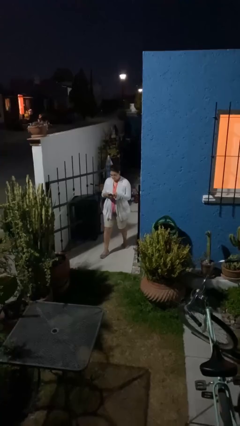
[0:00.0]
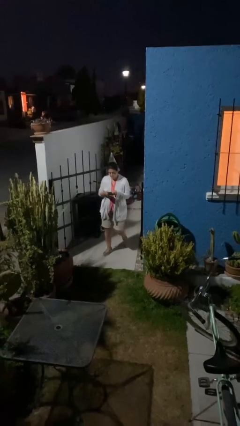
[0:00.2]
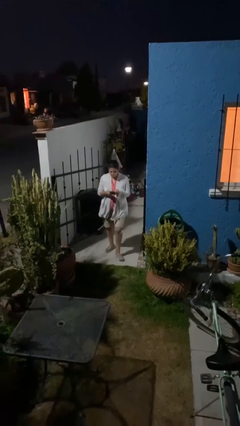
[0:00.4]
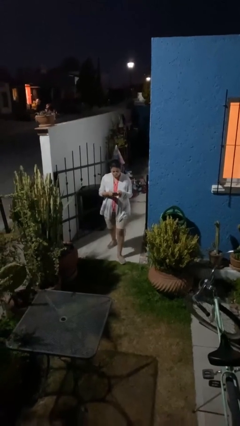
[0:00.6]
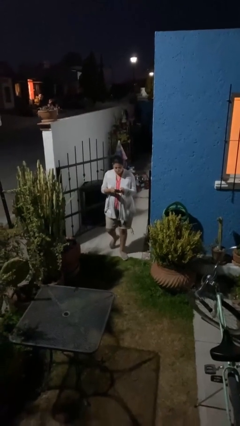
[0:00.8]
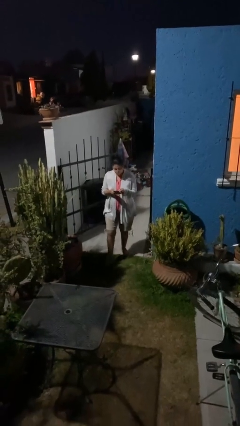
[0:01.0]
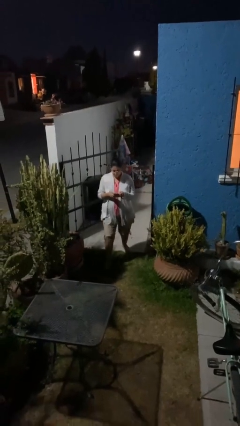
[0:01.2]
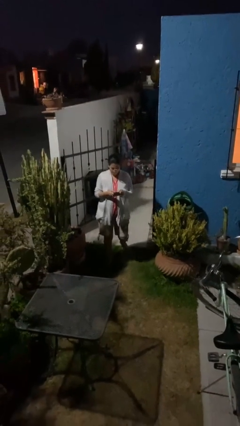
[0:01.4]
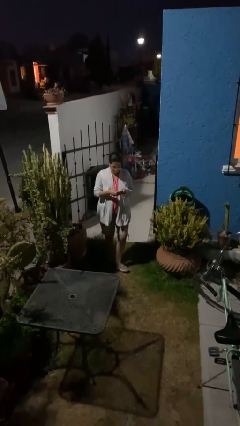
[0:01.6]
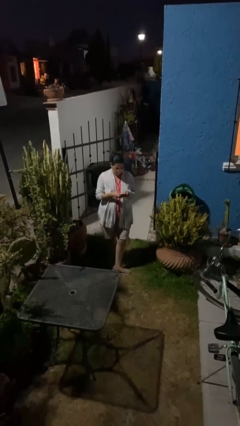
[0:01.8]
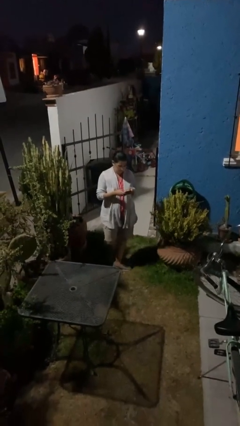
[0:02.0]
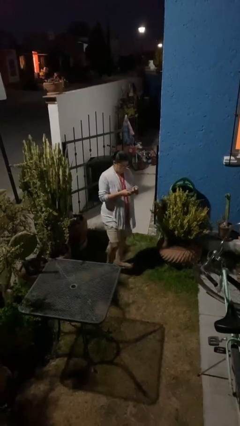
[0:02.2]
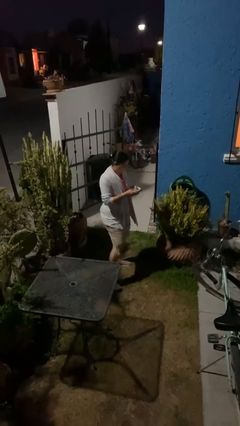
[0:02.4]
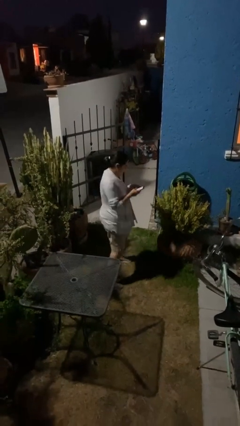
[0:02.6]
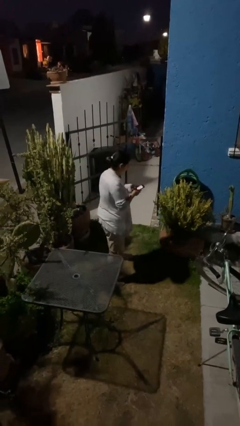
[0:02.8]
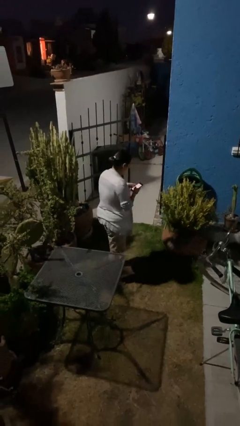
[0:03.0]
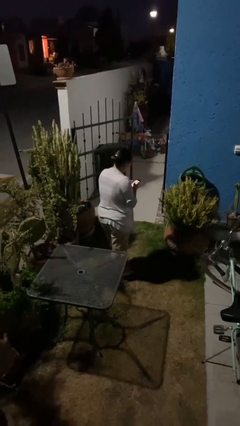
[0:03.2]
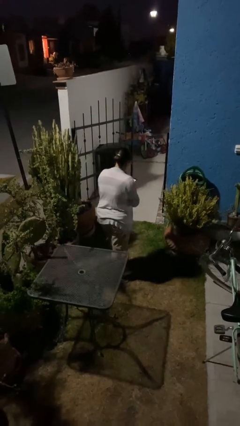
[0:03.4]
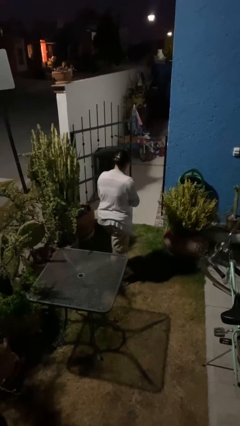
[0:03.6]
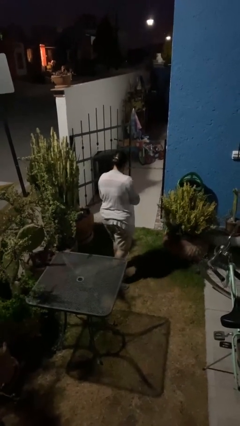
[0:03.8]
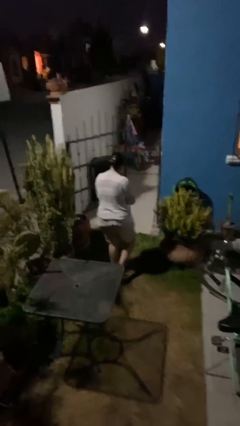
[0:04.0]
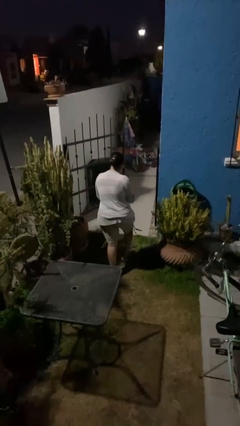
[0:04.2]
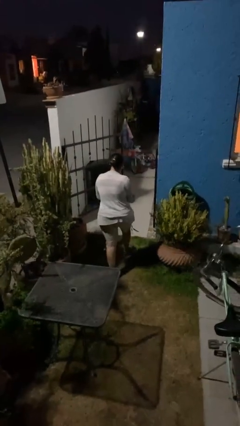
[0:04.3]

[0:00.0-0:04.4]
person enters scene through structure

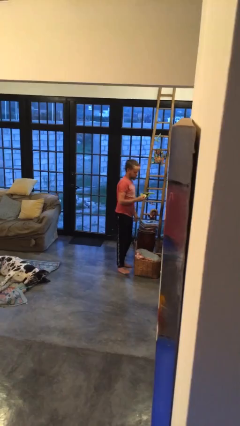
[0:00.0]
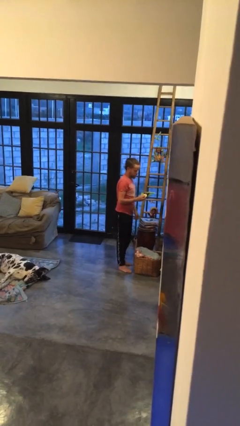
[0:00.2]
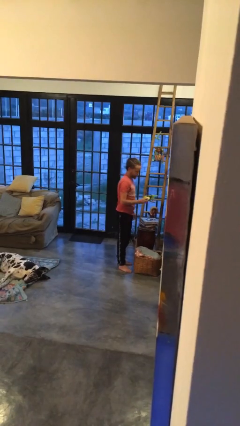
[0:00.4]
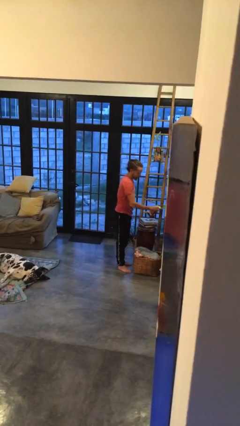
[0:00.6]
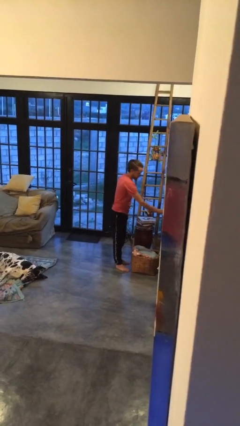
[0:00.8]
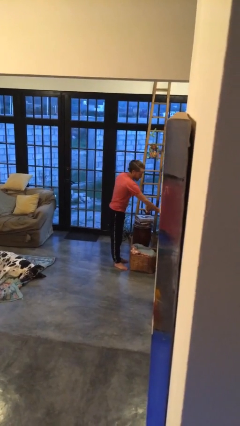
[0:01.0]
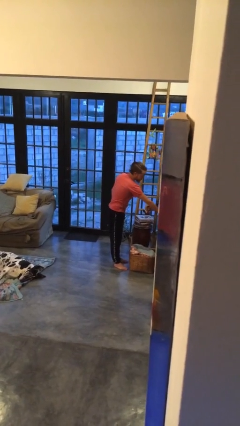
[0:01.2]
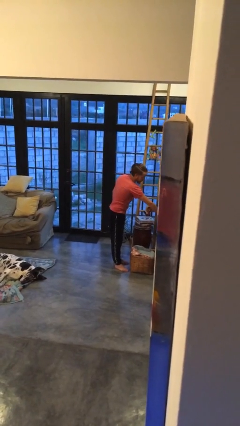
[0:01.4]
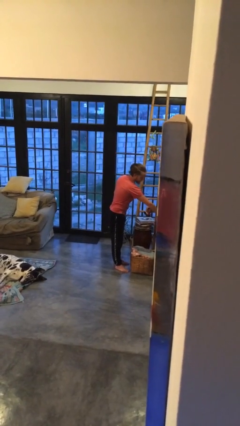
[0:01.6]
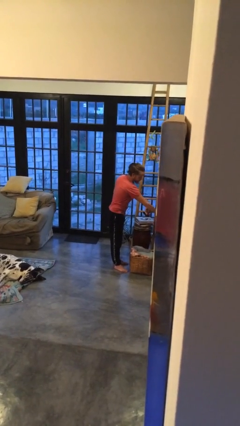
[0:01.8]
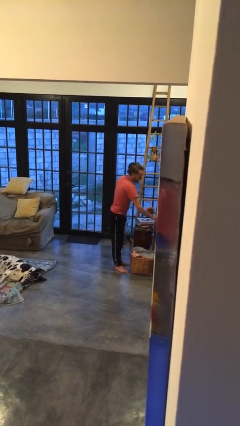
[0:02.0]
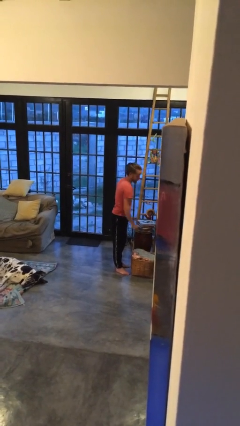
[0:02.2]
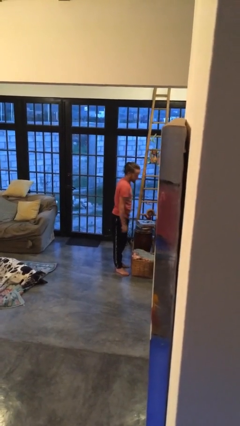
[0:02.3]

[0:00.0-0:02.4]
person puts down object on countertop

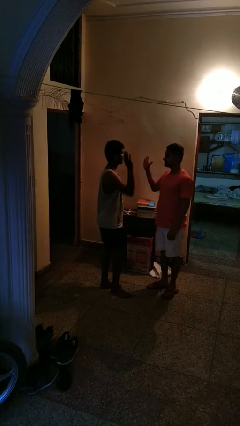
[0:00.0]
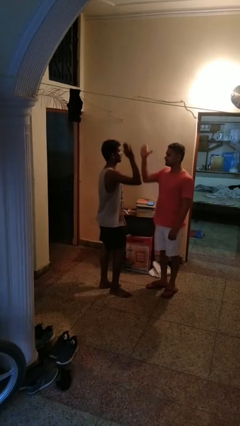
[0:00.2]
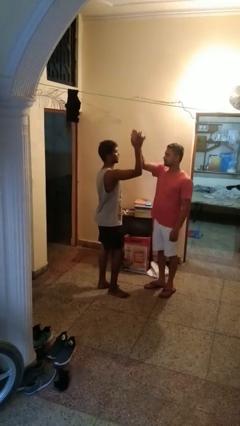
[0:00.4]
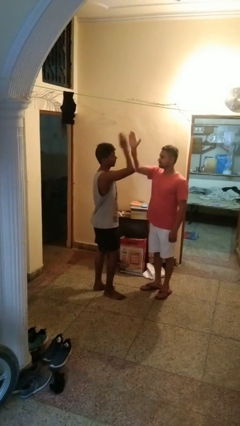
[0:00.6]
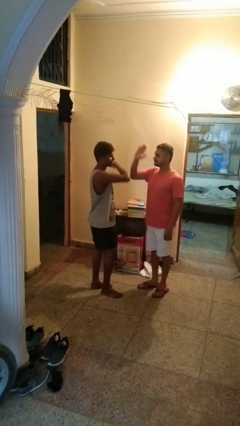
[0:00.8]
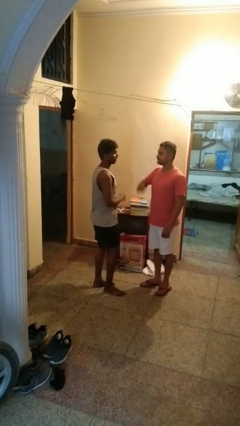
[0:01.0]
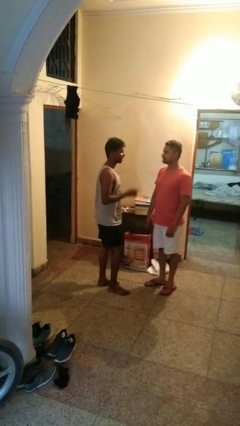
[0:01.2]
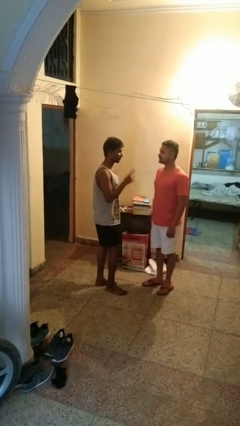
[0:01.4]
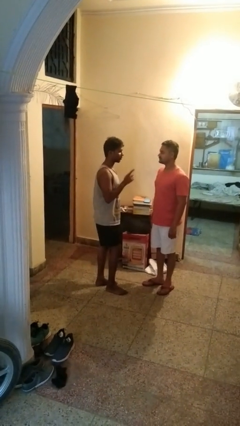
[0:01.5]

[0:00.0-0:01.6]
person highfives hand

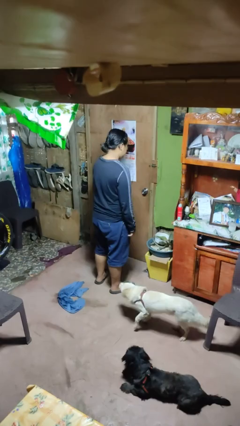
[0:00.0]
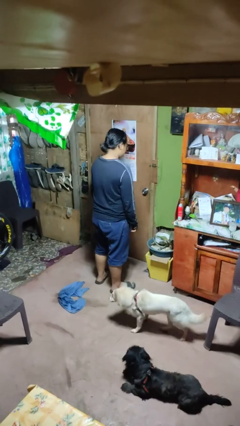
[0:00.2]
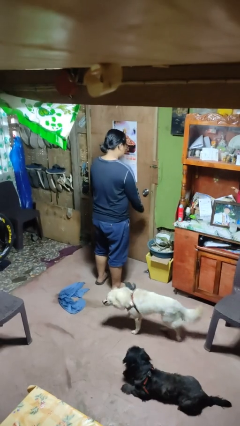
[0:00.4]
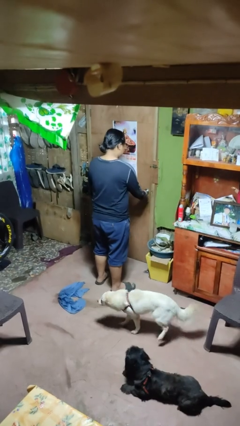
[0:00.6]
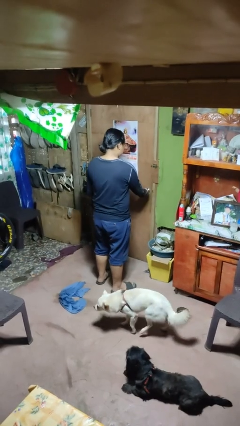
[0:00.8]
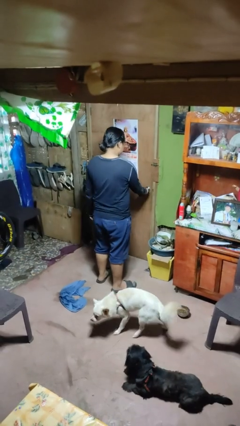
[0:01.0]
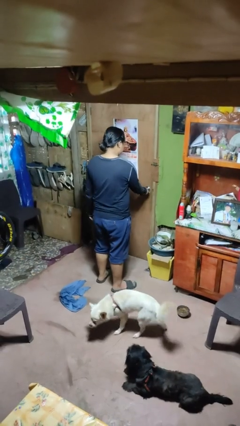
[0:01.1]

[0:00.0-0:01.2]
person locks door with keys

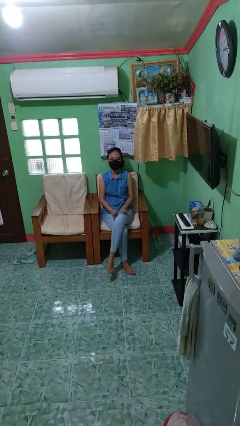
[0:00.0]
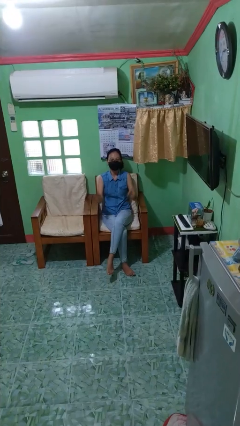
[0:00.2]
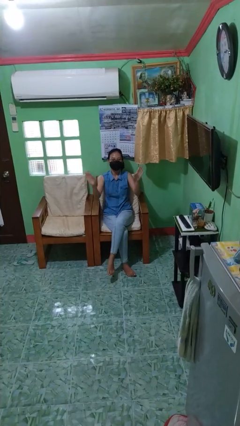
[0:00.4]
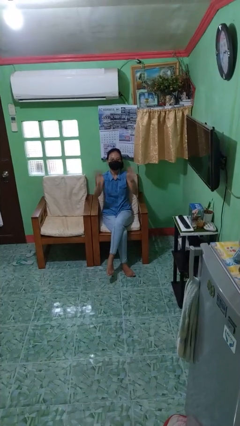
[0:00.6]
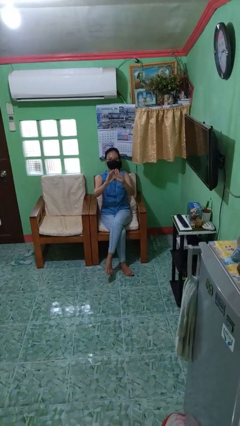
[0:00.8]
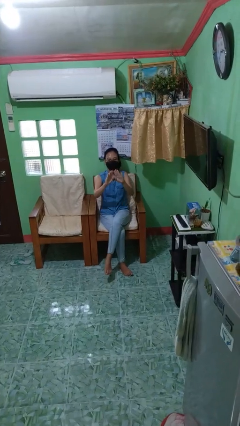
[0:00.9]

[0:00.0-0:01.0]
person gestures zoom out

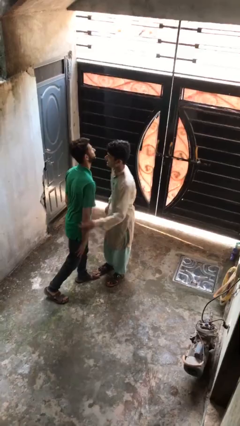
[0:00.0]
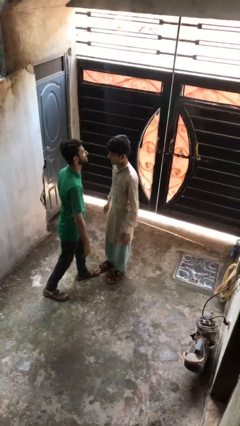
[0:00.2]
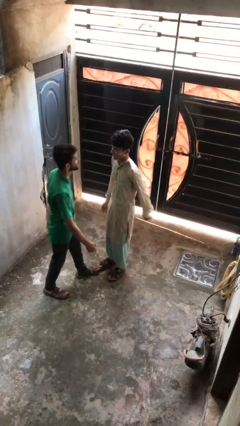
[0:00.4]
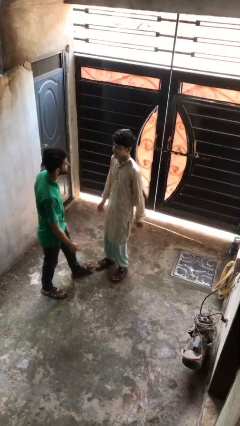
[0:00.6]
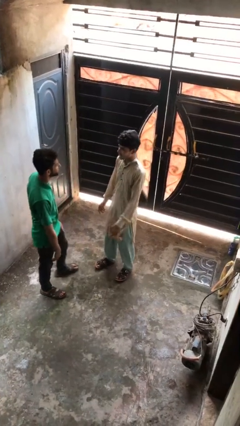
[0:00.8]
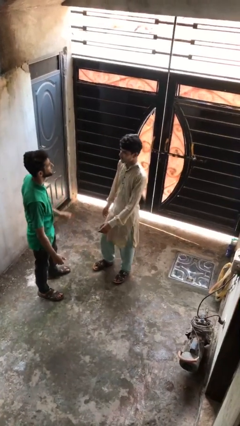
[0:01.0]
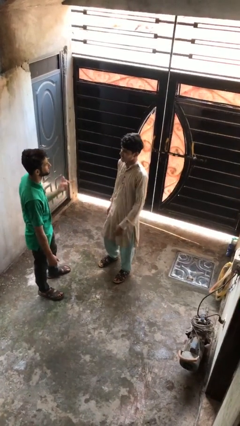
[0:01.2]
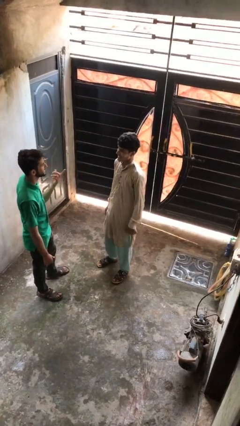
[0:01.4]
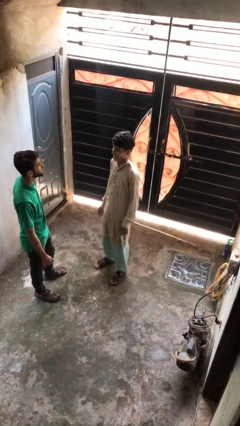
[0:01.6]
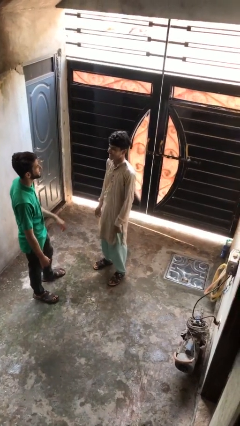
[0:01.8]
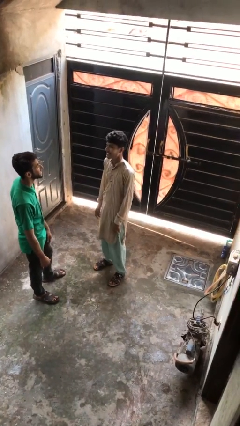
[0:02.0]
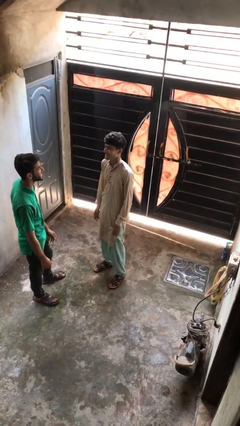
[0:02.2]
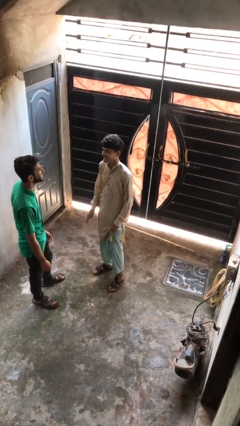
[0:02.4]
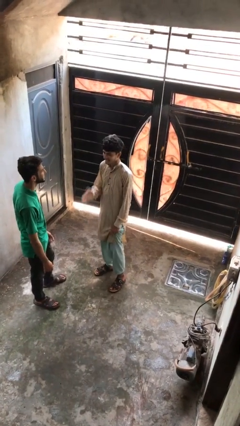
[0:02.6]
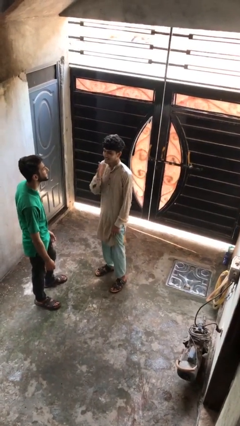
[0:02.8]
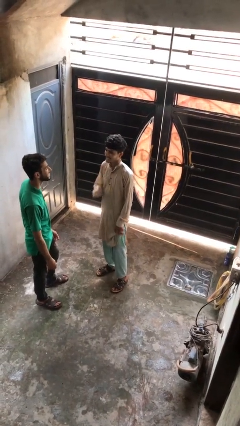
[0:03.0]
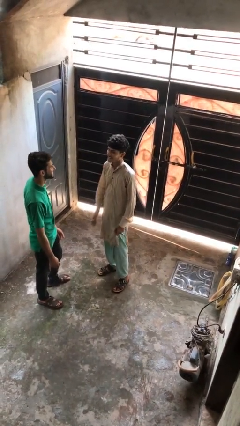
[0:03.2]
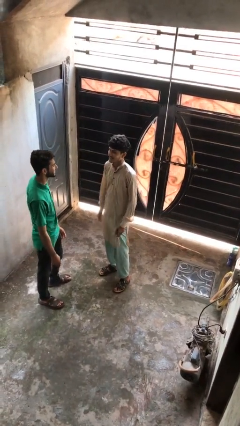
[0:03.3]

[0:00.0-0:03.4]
person talks to person

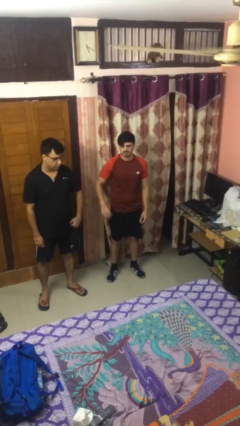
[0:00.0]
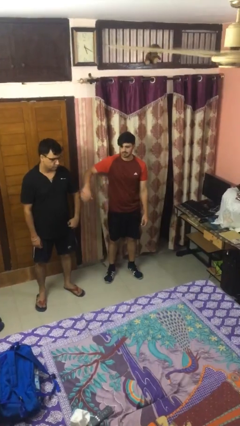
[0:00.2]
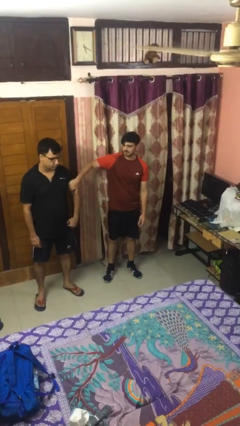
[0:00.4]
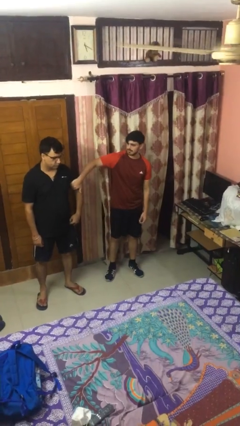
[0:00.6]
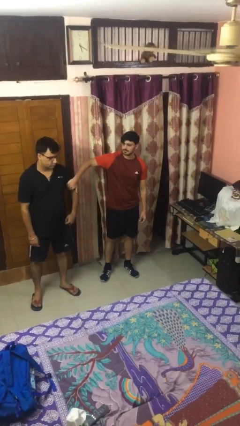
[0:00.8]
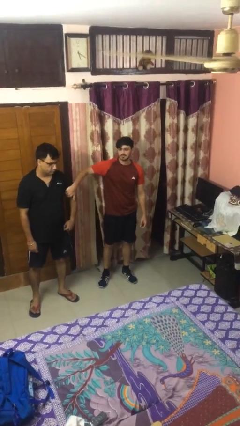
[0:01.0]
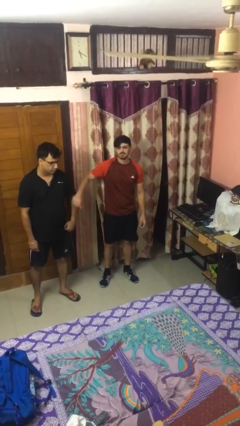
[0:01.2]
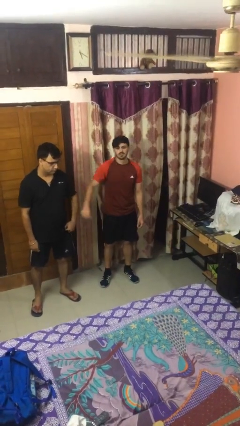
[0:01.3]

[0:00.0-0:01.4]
person grabs person by bicep

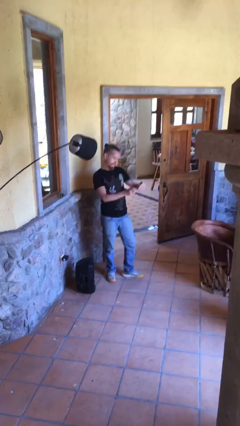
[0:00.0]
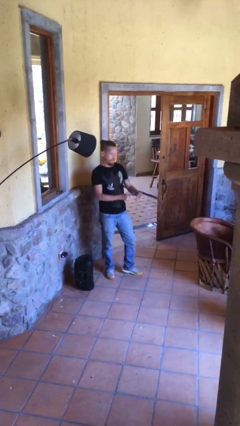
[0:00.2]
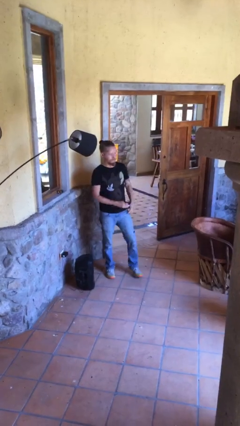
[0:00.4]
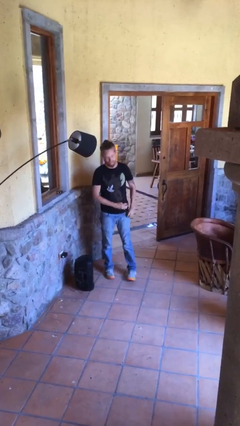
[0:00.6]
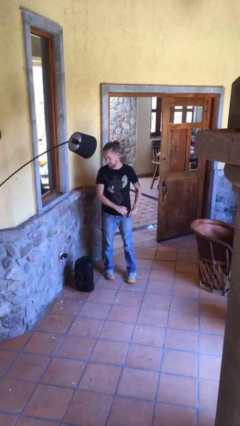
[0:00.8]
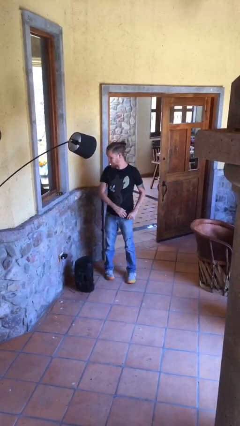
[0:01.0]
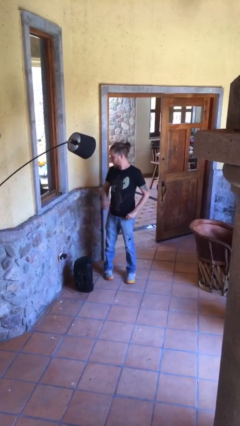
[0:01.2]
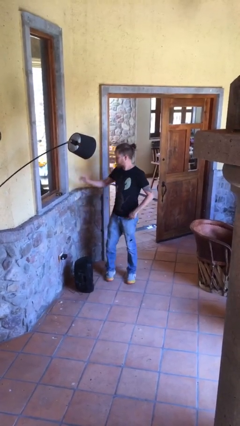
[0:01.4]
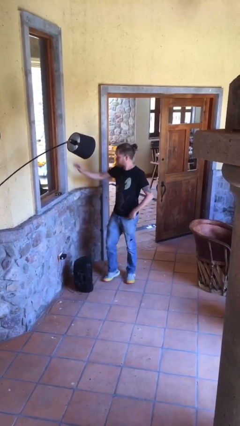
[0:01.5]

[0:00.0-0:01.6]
person puts phone into pocket

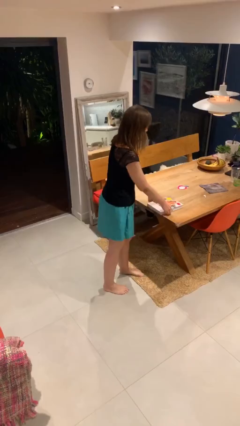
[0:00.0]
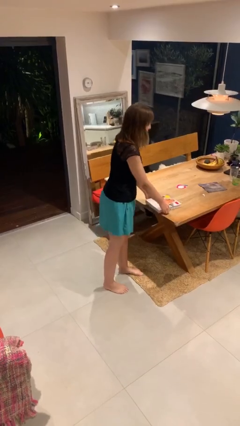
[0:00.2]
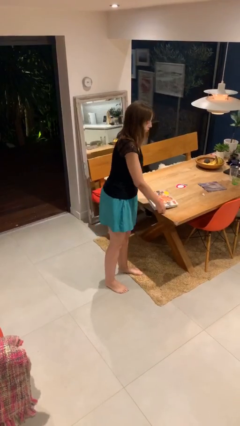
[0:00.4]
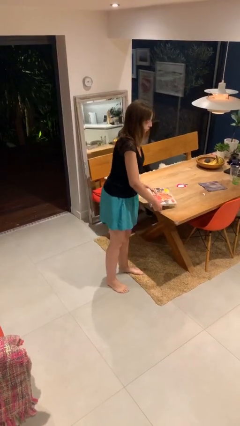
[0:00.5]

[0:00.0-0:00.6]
person picks up object from table
